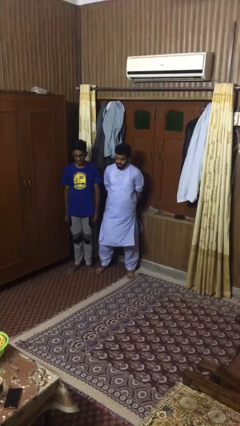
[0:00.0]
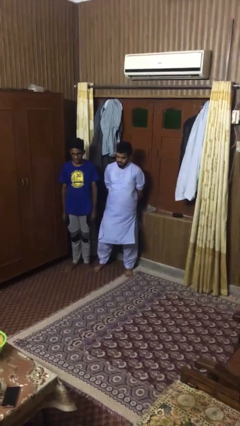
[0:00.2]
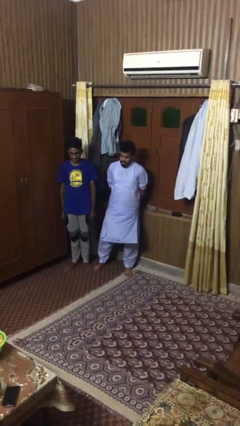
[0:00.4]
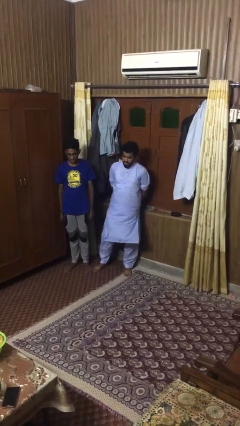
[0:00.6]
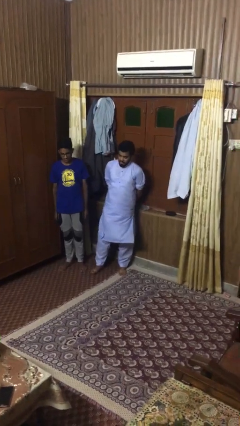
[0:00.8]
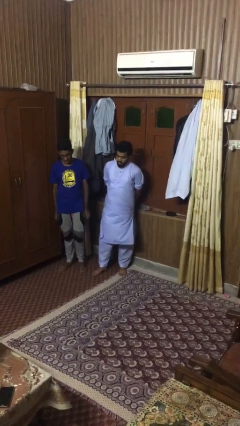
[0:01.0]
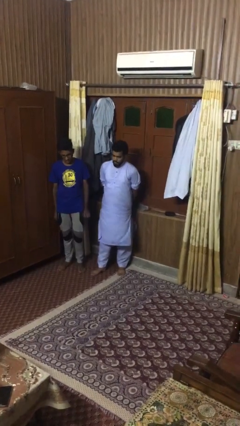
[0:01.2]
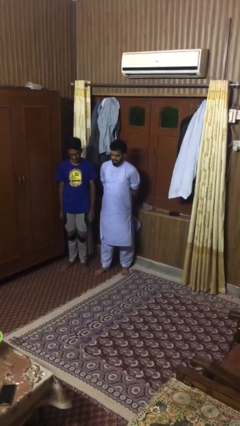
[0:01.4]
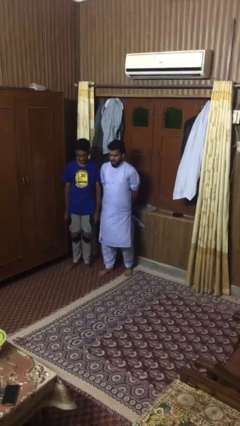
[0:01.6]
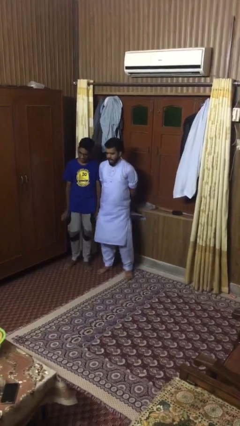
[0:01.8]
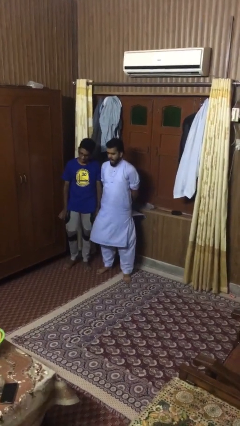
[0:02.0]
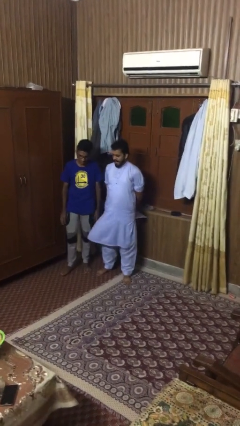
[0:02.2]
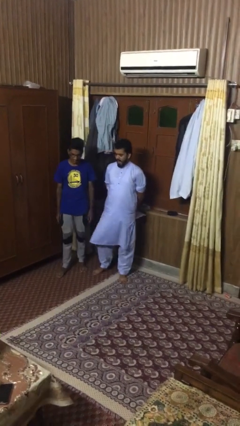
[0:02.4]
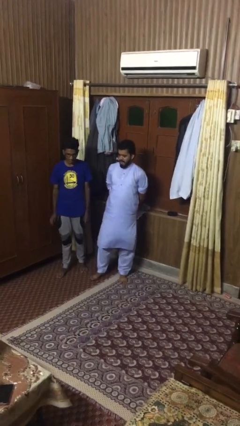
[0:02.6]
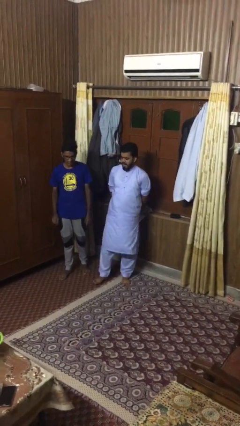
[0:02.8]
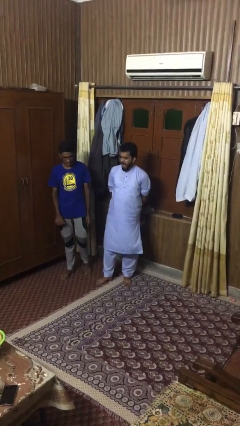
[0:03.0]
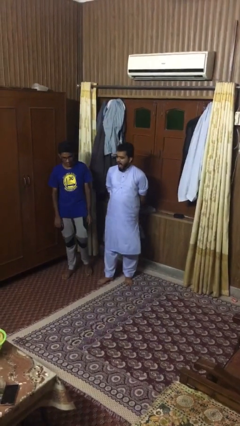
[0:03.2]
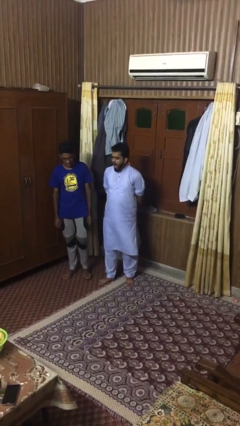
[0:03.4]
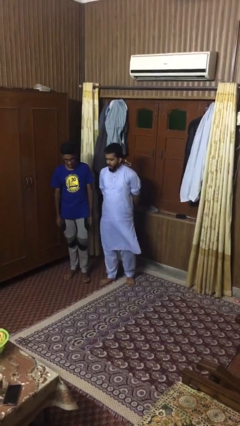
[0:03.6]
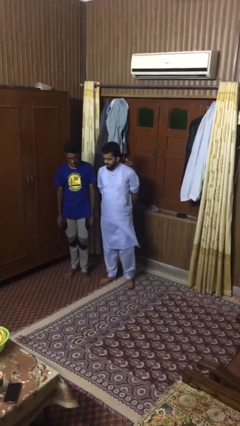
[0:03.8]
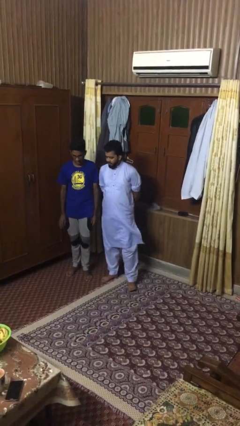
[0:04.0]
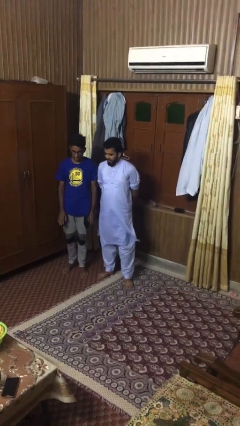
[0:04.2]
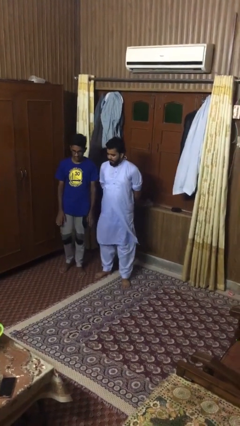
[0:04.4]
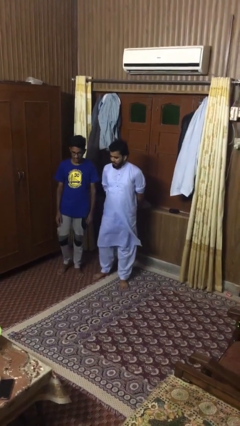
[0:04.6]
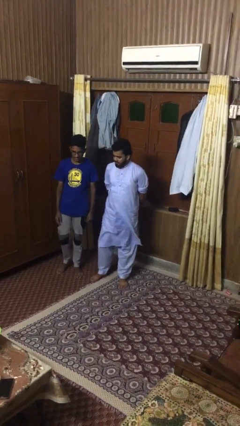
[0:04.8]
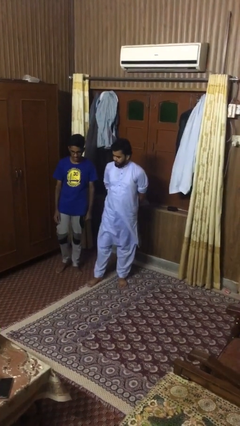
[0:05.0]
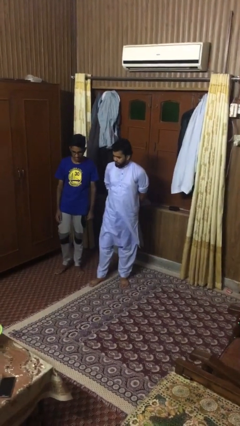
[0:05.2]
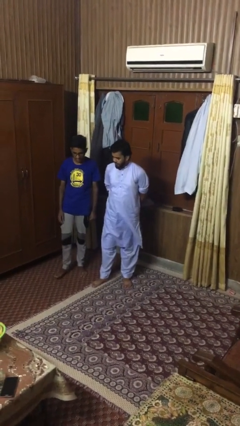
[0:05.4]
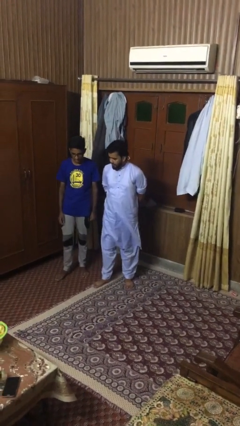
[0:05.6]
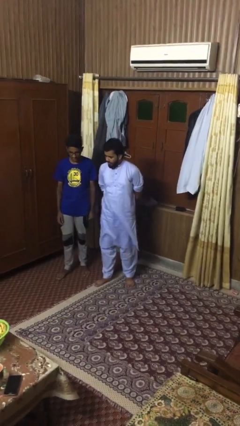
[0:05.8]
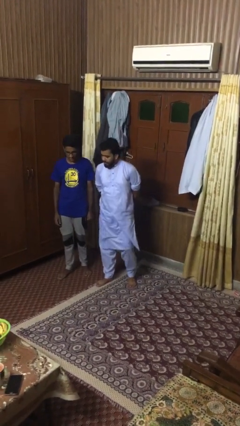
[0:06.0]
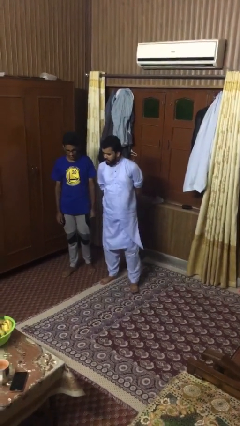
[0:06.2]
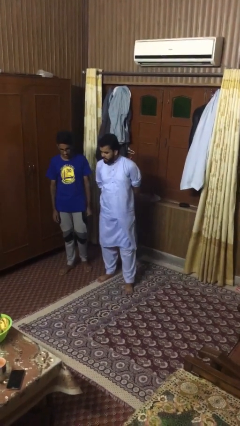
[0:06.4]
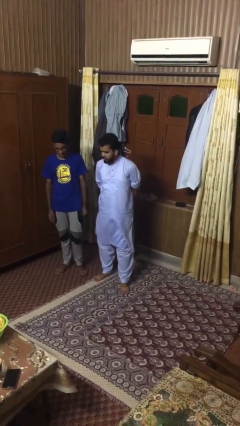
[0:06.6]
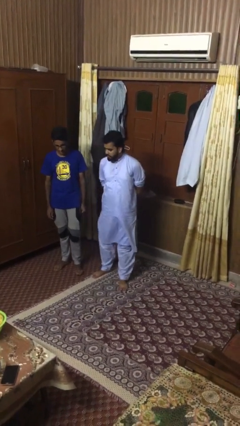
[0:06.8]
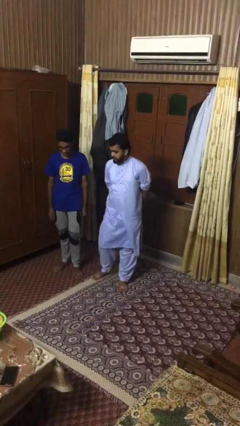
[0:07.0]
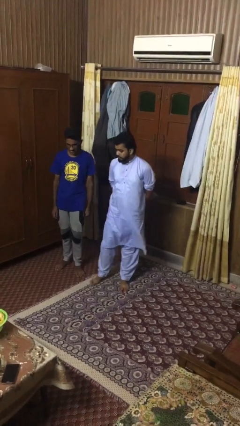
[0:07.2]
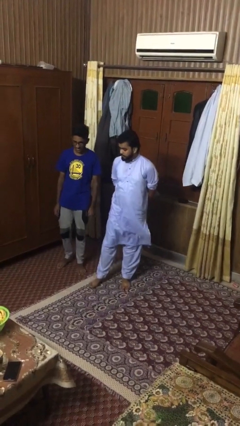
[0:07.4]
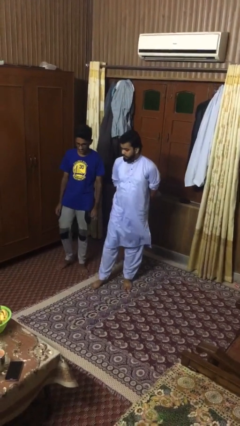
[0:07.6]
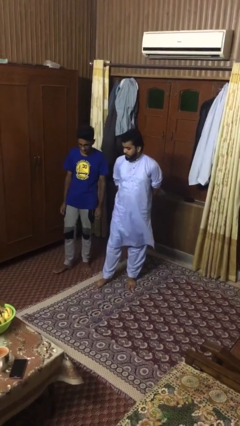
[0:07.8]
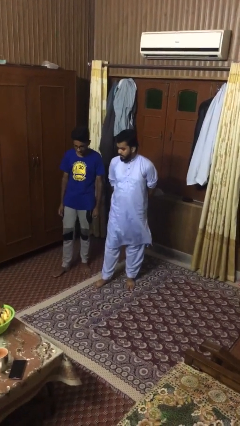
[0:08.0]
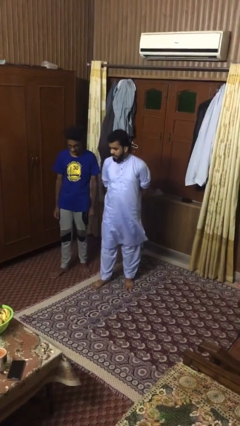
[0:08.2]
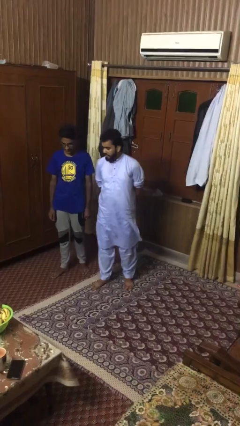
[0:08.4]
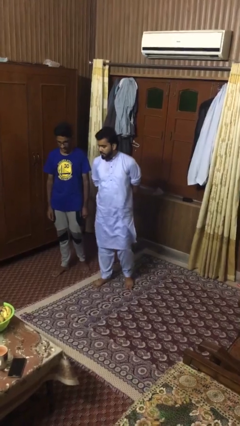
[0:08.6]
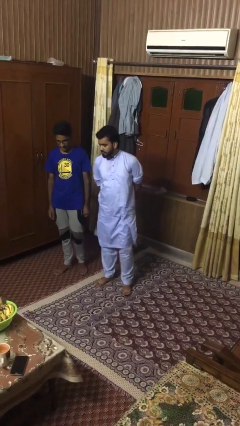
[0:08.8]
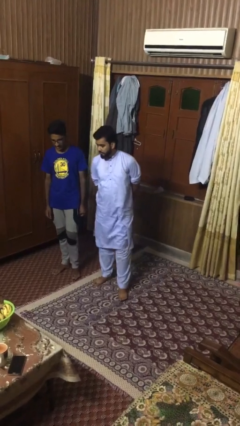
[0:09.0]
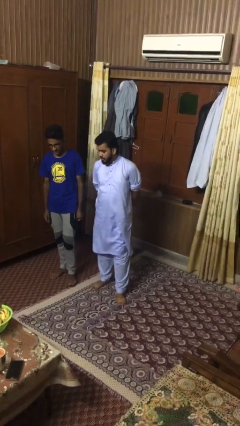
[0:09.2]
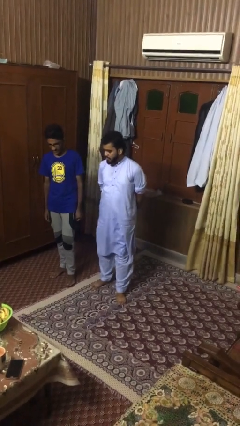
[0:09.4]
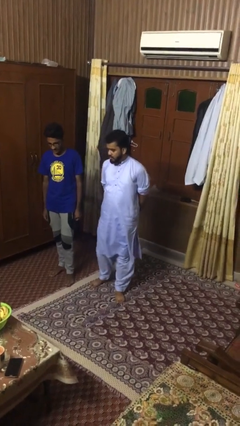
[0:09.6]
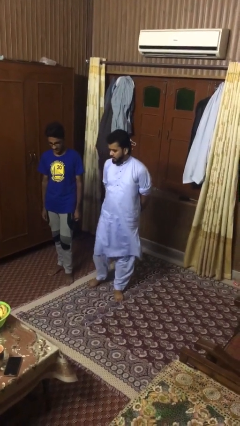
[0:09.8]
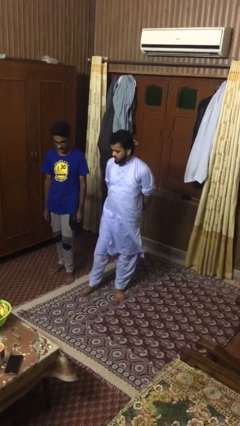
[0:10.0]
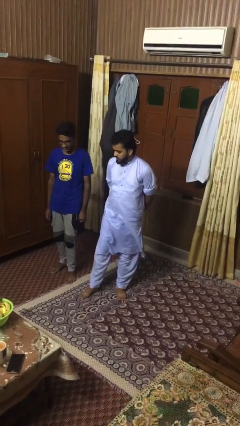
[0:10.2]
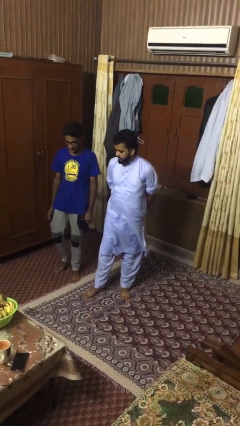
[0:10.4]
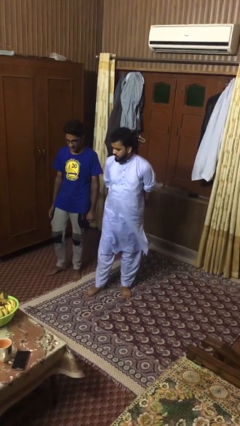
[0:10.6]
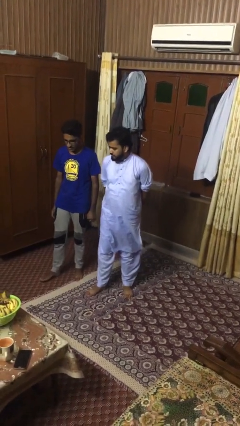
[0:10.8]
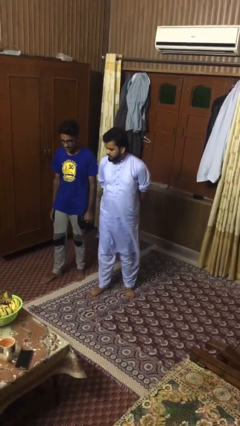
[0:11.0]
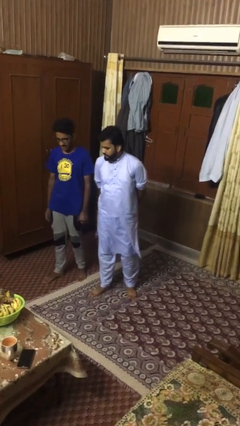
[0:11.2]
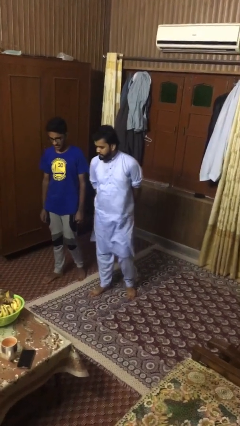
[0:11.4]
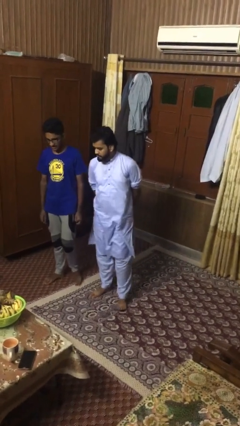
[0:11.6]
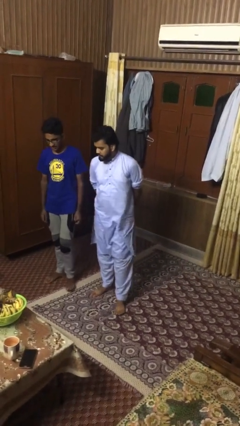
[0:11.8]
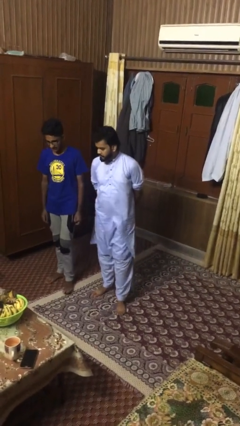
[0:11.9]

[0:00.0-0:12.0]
person talks to person

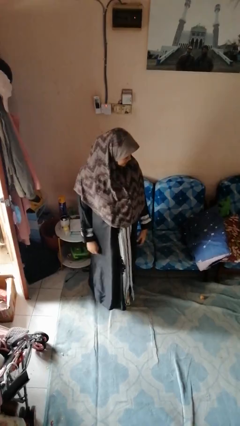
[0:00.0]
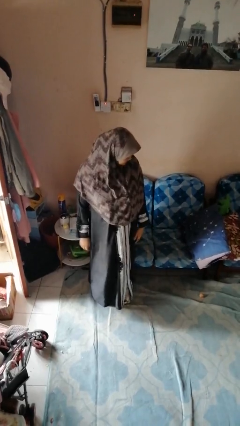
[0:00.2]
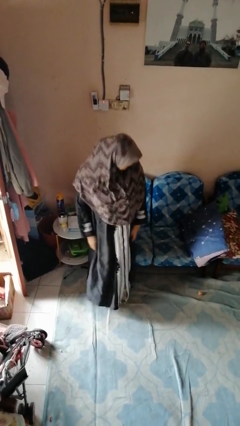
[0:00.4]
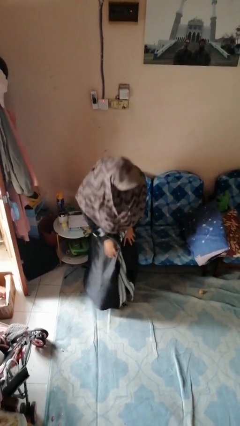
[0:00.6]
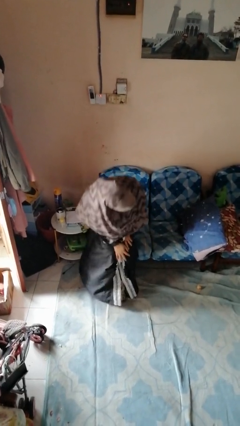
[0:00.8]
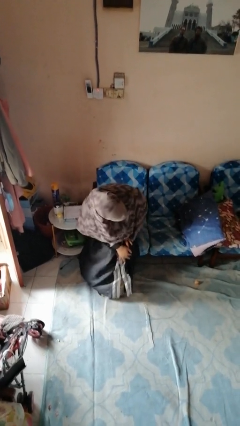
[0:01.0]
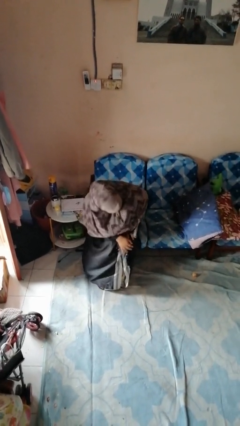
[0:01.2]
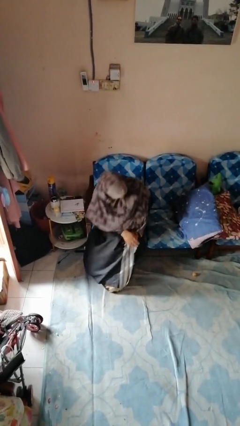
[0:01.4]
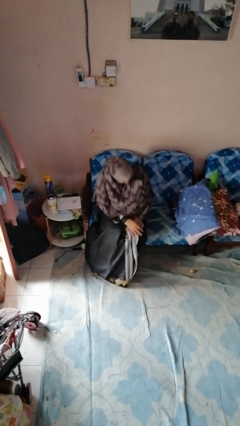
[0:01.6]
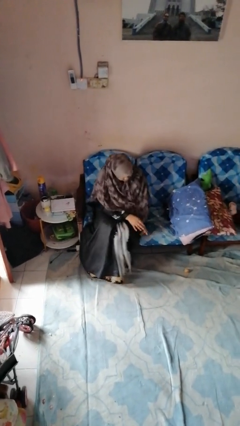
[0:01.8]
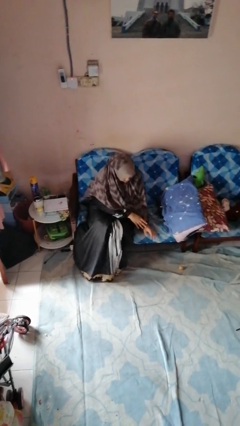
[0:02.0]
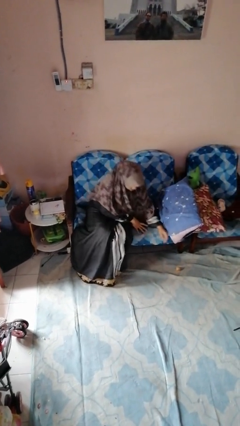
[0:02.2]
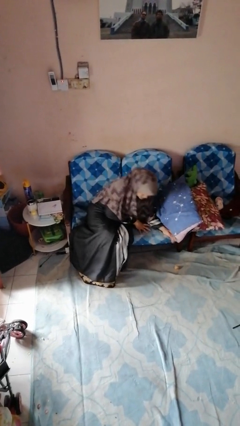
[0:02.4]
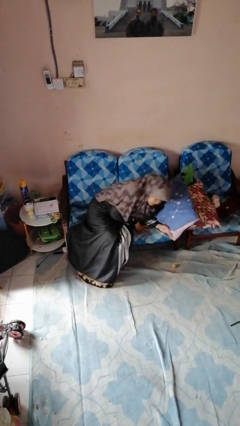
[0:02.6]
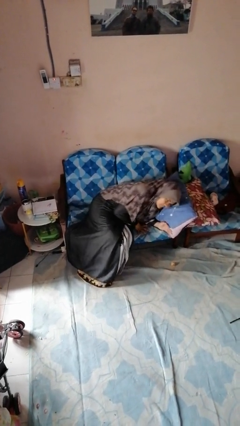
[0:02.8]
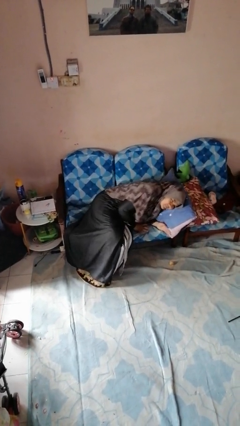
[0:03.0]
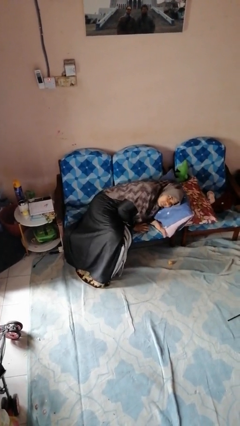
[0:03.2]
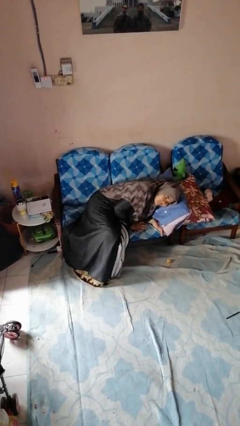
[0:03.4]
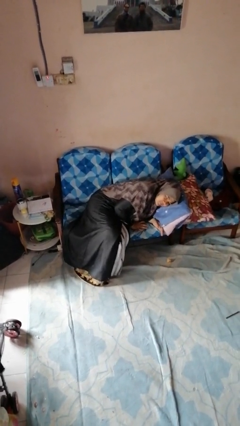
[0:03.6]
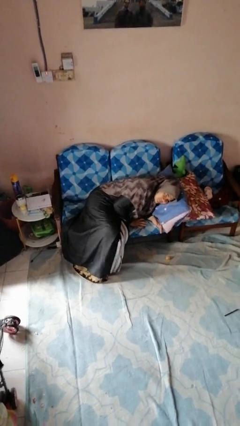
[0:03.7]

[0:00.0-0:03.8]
person lies down on couch

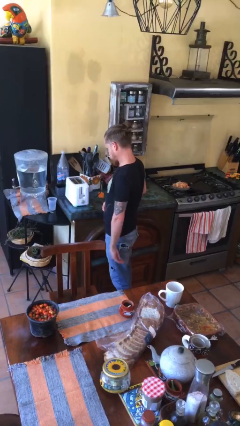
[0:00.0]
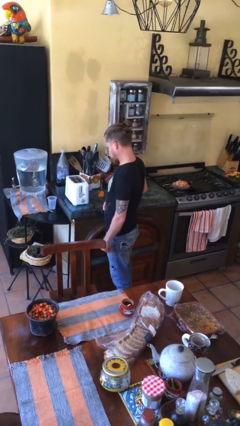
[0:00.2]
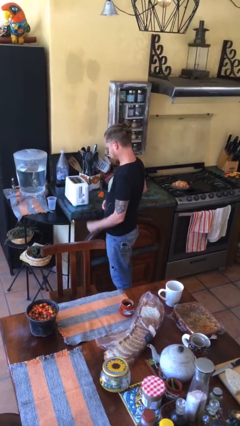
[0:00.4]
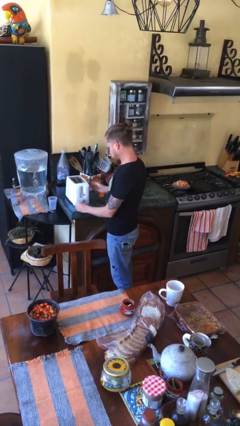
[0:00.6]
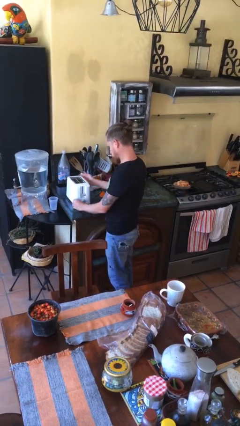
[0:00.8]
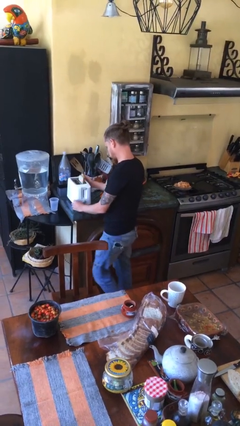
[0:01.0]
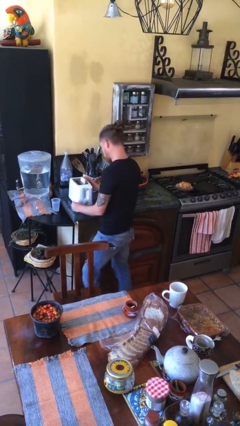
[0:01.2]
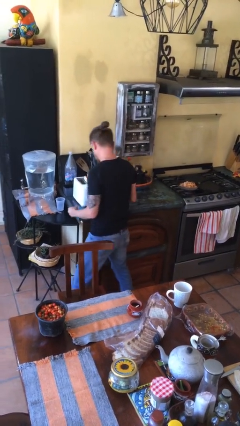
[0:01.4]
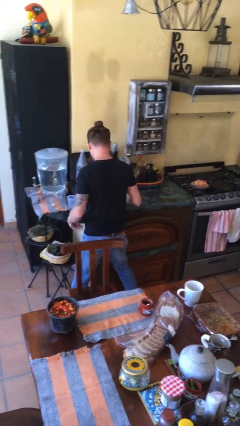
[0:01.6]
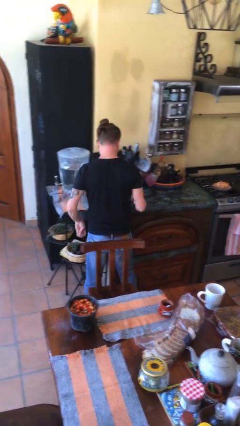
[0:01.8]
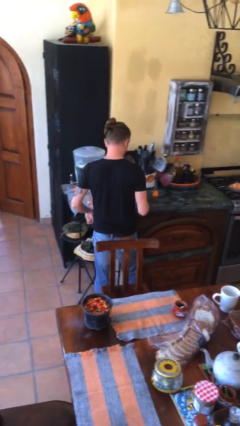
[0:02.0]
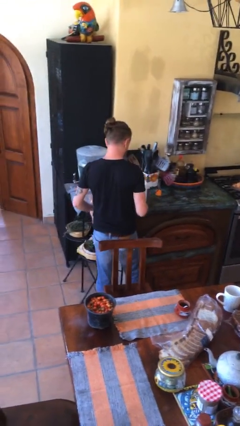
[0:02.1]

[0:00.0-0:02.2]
person takes object from toaster
